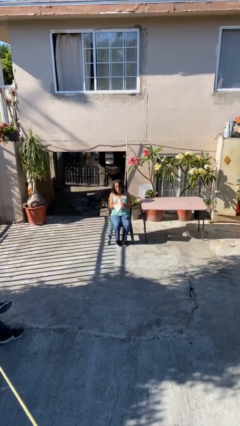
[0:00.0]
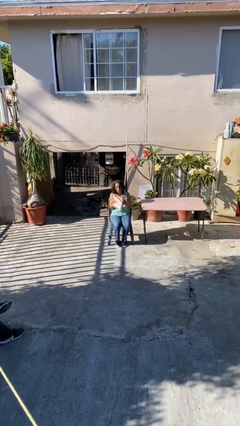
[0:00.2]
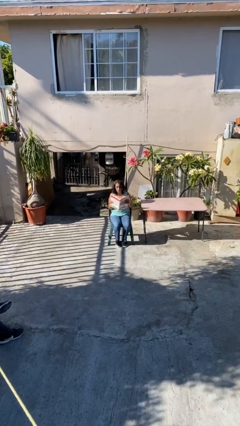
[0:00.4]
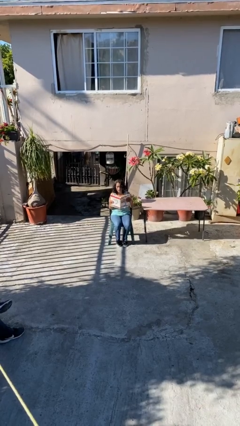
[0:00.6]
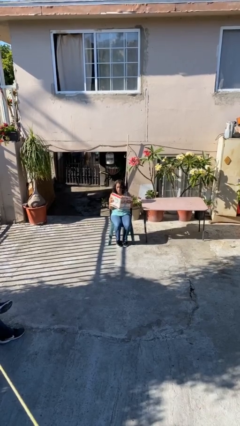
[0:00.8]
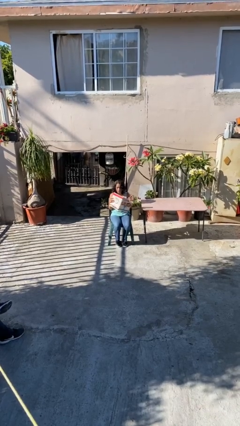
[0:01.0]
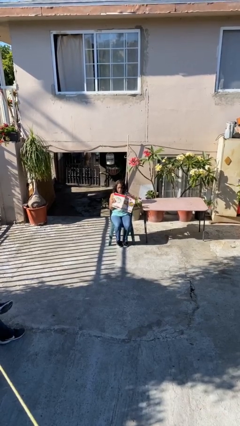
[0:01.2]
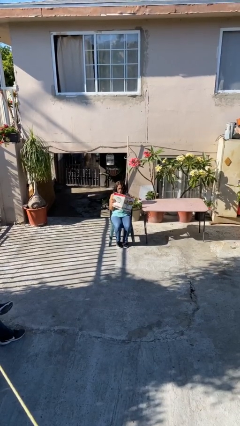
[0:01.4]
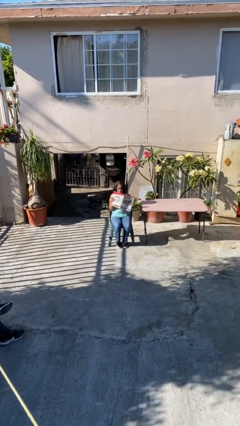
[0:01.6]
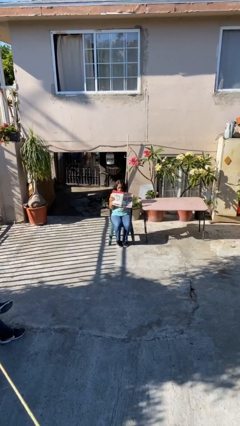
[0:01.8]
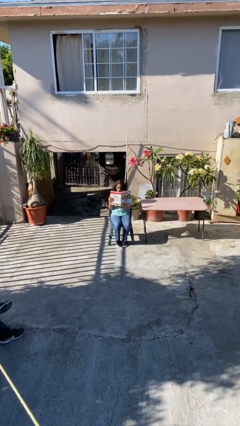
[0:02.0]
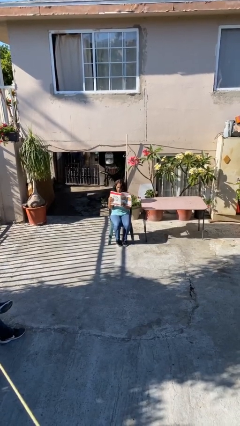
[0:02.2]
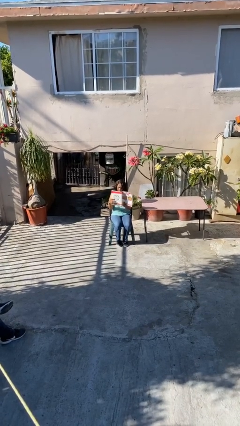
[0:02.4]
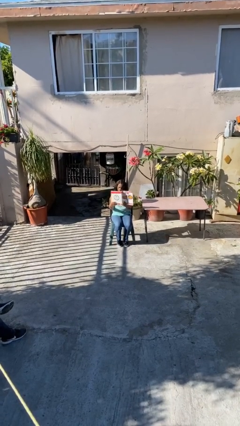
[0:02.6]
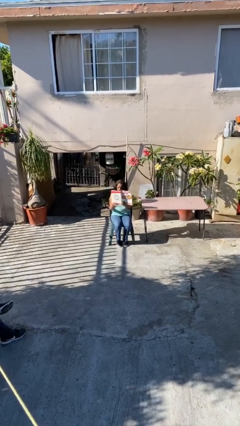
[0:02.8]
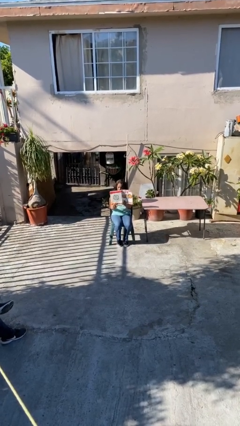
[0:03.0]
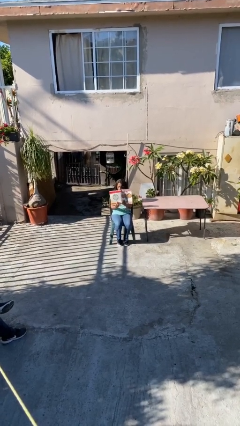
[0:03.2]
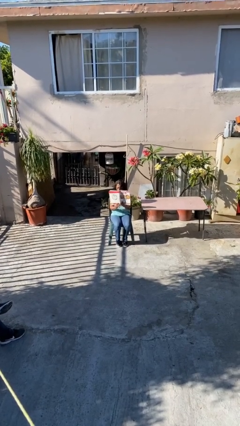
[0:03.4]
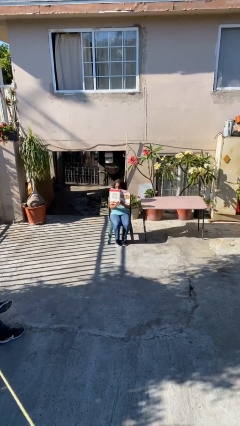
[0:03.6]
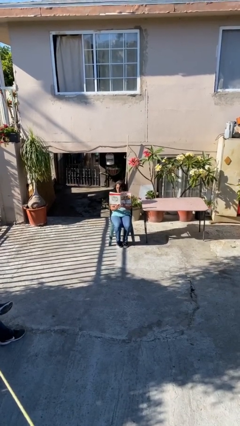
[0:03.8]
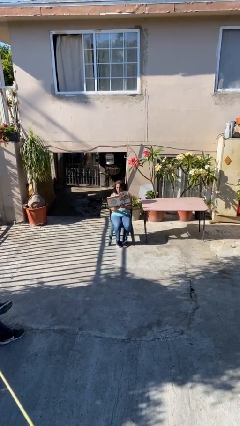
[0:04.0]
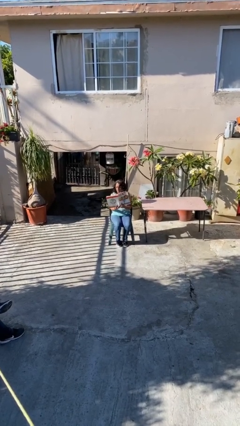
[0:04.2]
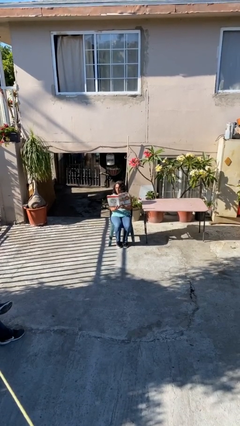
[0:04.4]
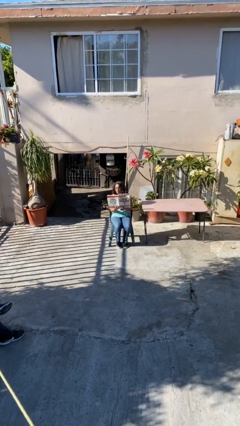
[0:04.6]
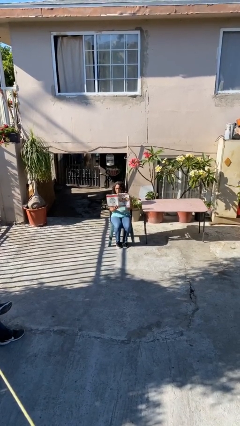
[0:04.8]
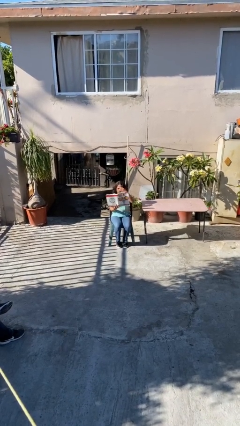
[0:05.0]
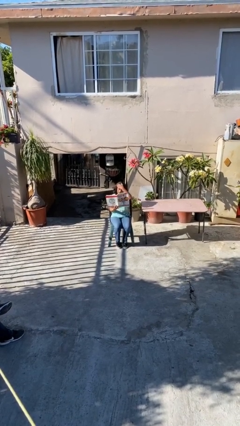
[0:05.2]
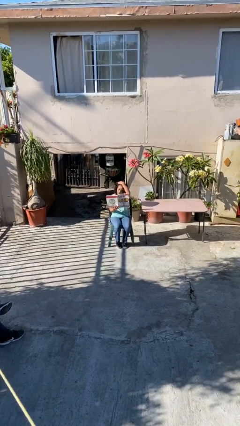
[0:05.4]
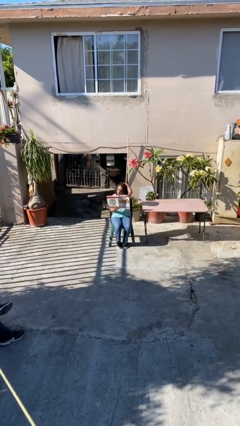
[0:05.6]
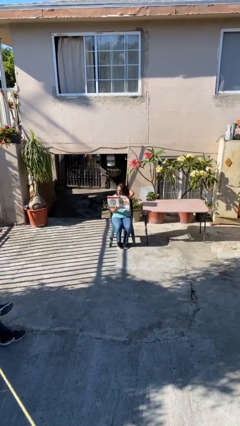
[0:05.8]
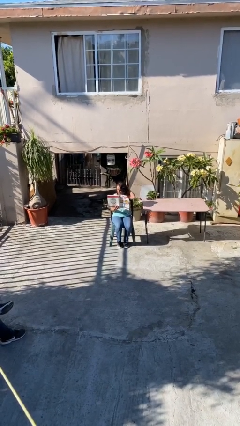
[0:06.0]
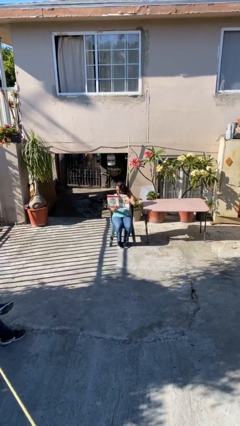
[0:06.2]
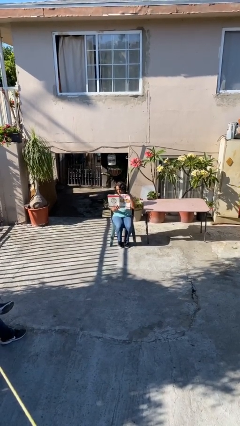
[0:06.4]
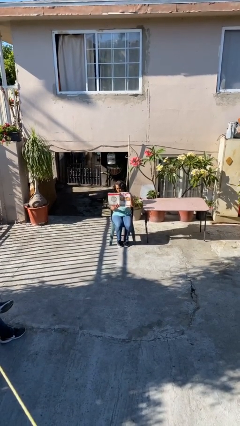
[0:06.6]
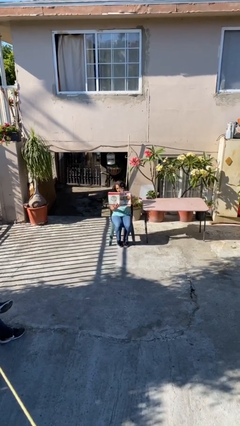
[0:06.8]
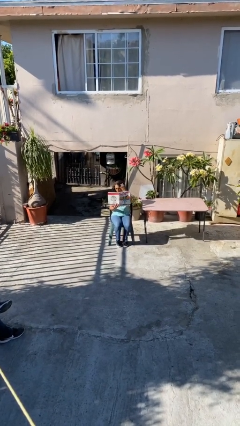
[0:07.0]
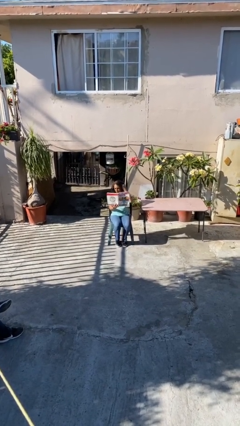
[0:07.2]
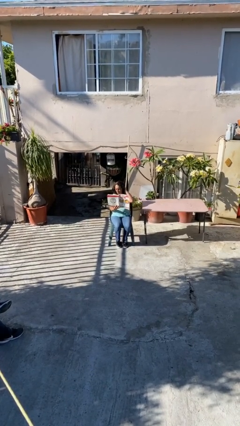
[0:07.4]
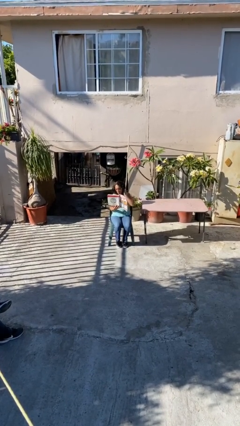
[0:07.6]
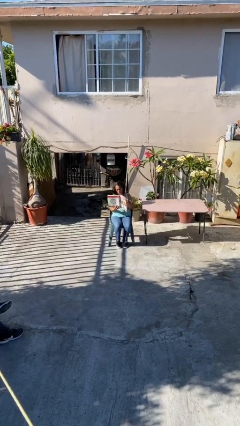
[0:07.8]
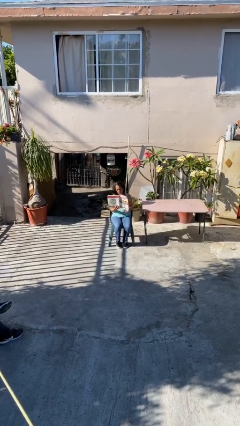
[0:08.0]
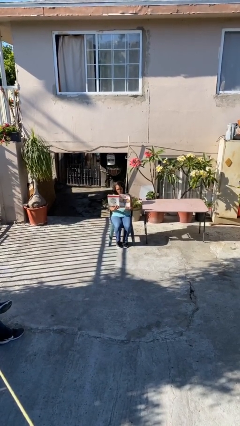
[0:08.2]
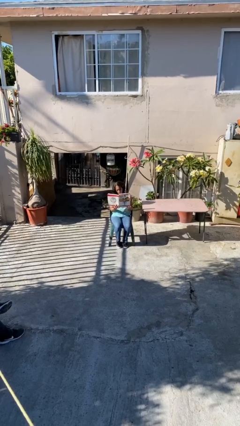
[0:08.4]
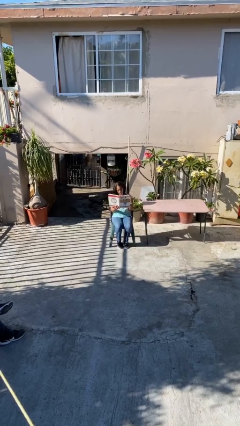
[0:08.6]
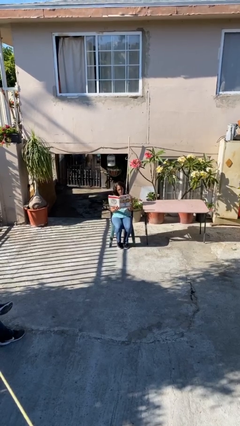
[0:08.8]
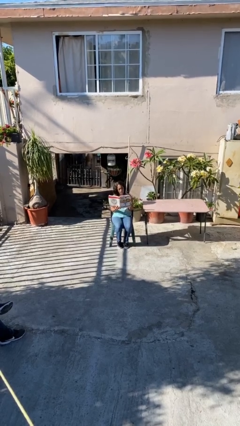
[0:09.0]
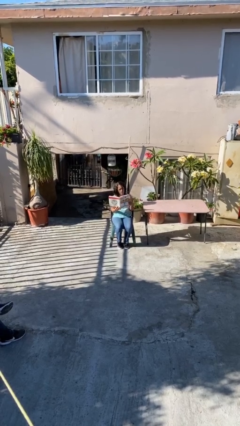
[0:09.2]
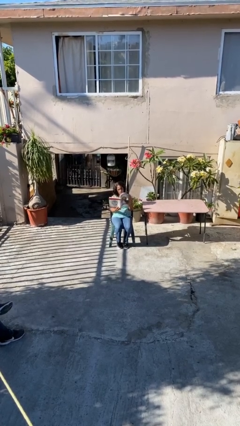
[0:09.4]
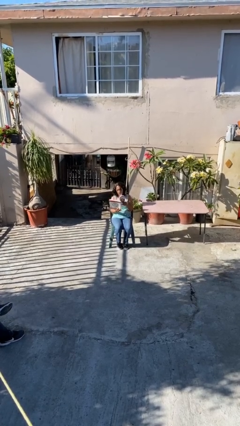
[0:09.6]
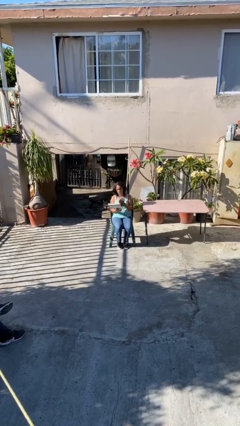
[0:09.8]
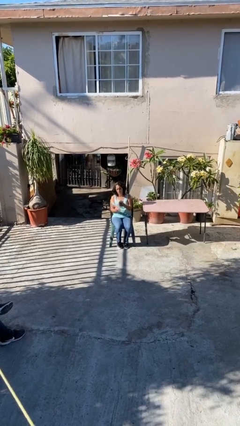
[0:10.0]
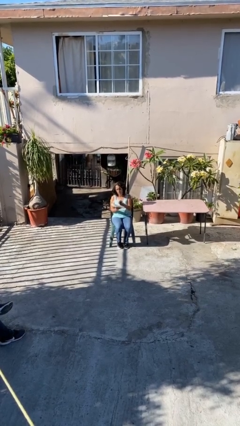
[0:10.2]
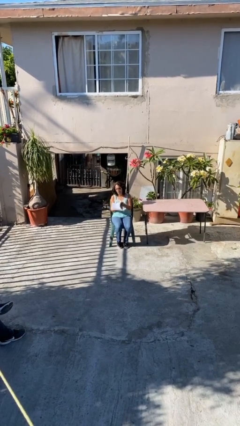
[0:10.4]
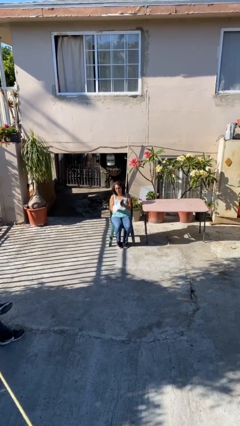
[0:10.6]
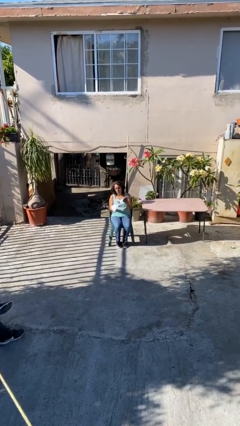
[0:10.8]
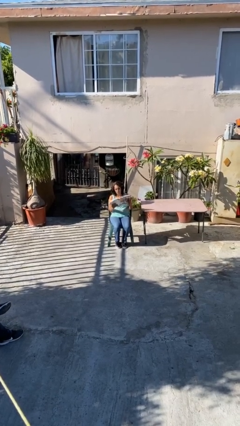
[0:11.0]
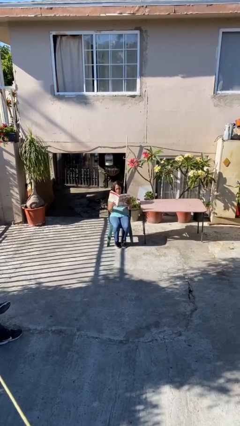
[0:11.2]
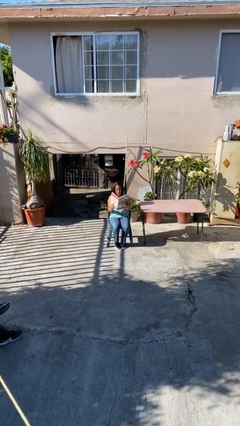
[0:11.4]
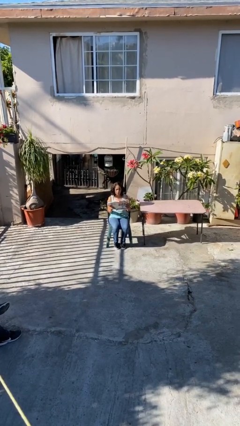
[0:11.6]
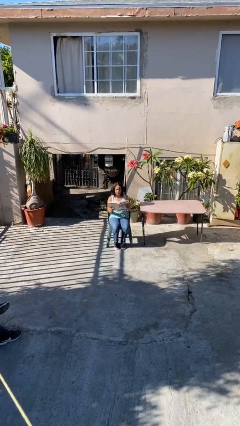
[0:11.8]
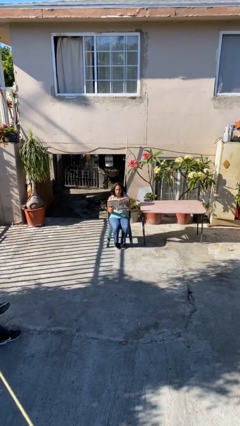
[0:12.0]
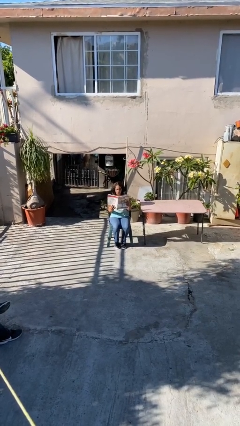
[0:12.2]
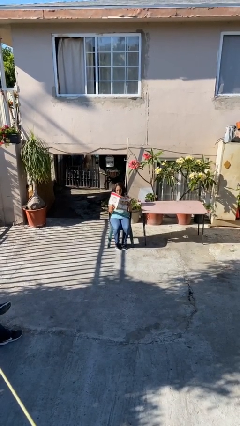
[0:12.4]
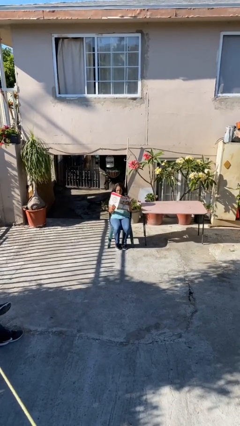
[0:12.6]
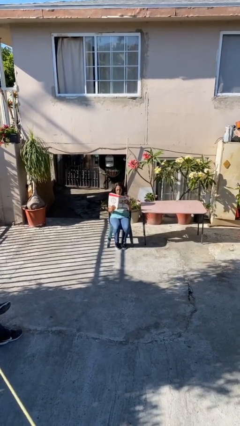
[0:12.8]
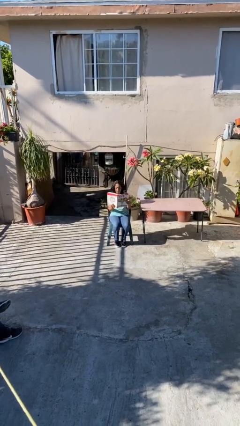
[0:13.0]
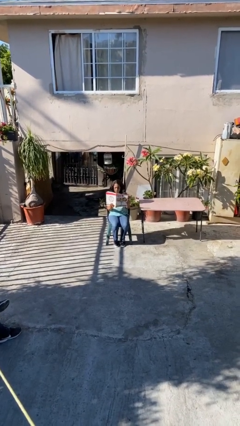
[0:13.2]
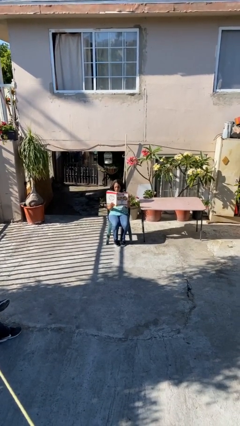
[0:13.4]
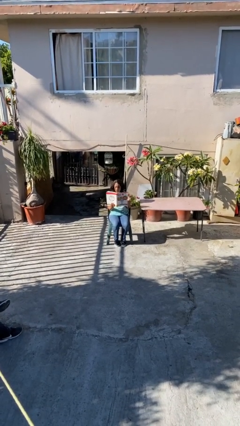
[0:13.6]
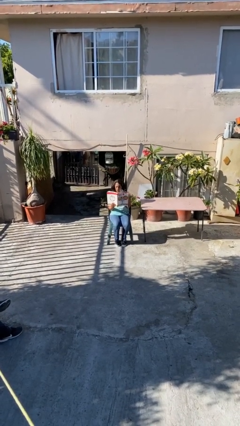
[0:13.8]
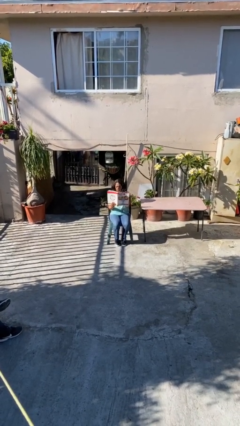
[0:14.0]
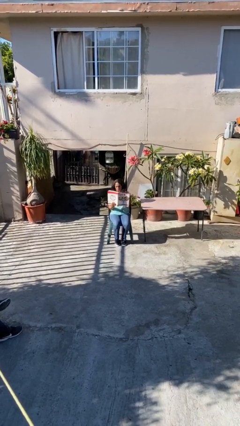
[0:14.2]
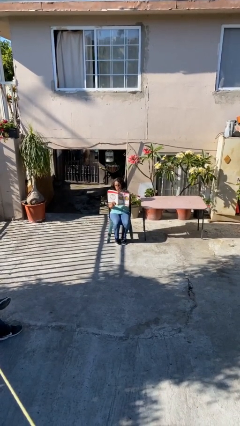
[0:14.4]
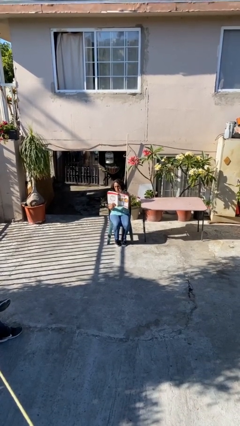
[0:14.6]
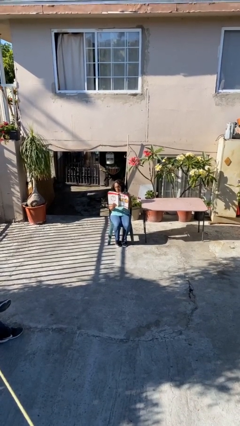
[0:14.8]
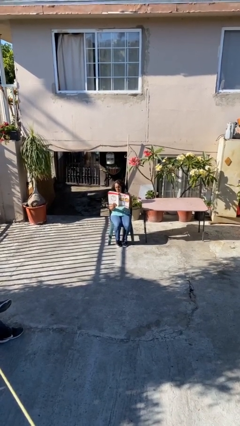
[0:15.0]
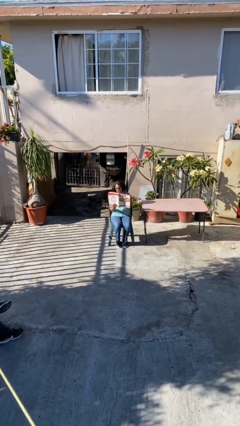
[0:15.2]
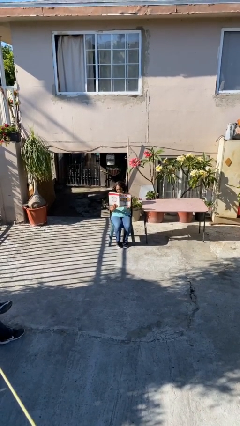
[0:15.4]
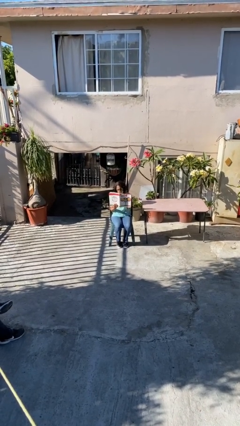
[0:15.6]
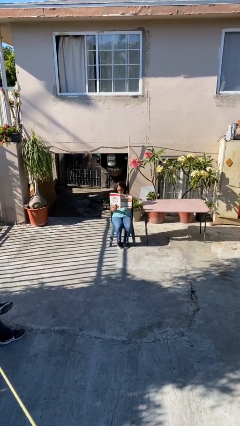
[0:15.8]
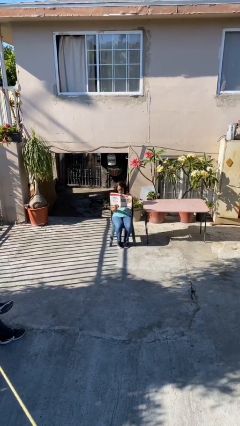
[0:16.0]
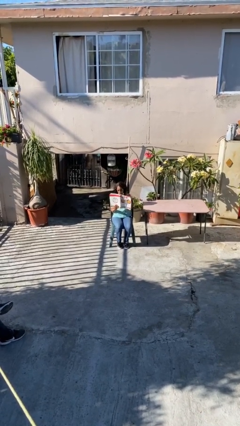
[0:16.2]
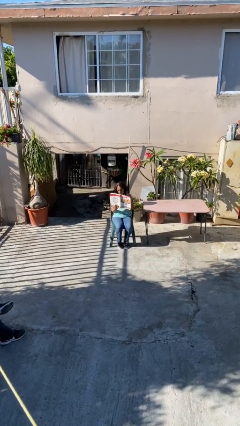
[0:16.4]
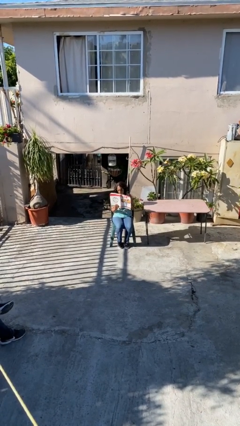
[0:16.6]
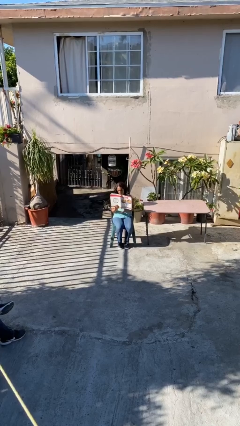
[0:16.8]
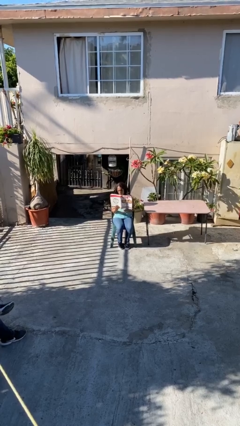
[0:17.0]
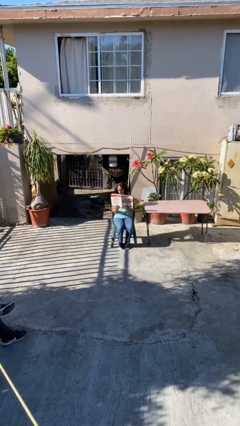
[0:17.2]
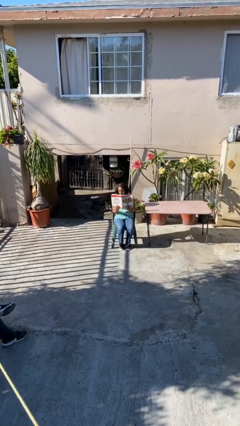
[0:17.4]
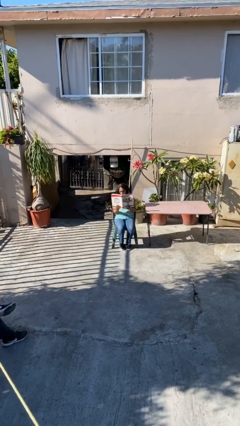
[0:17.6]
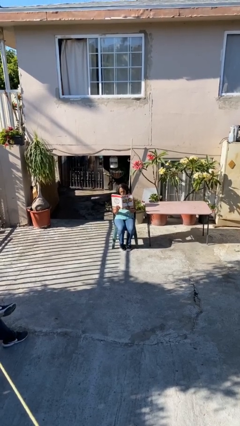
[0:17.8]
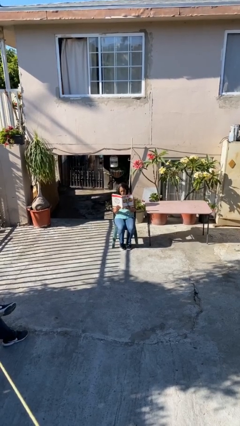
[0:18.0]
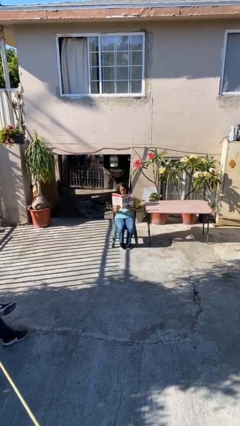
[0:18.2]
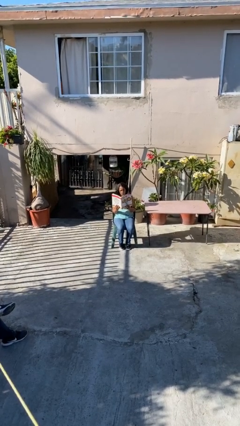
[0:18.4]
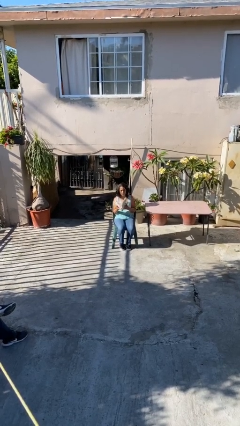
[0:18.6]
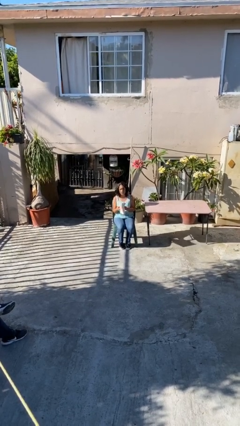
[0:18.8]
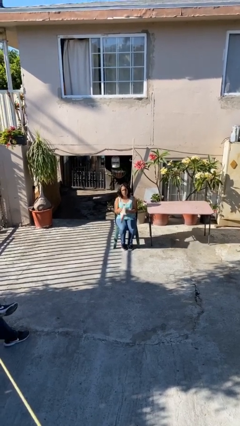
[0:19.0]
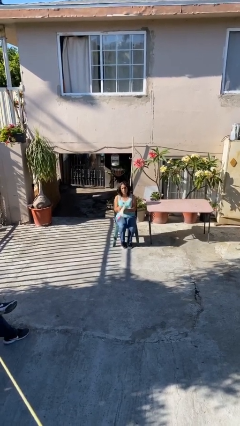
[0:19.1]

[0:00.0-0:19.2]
person reads document
